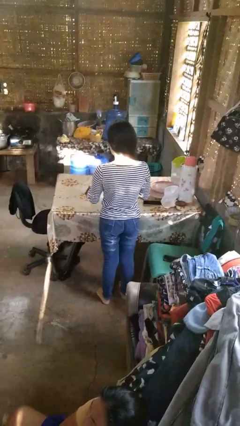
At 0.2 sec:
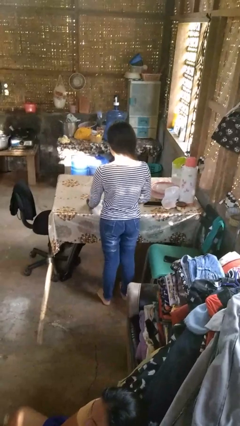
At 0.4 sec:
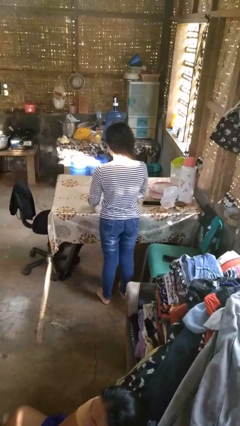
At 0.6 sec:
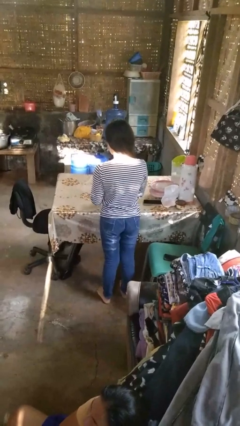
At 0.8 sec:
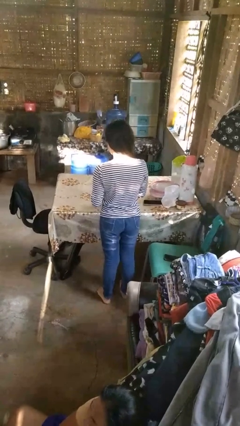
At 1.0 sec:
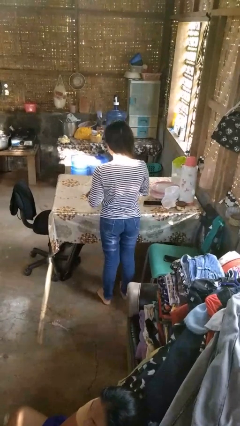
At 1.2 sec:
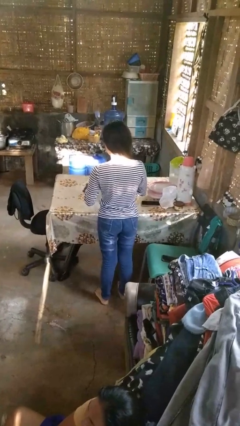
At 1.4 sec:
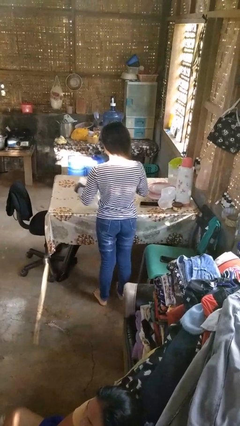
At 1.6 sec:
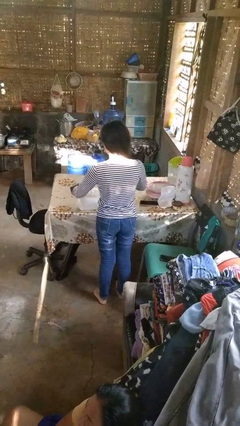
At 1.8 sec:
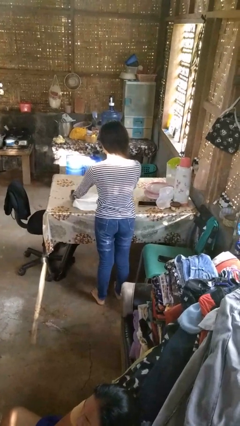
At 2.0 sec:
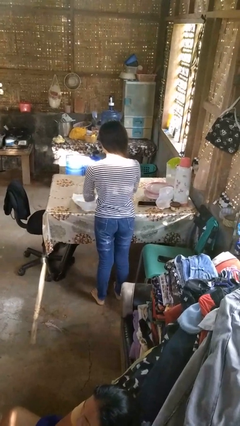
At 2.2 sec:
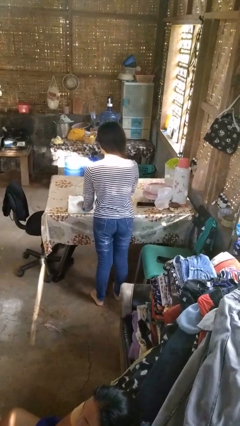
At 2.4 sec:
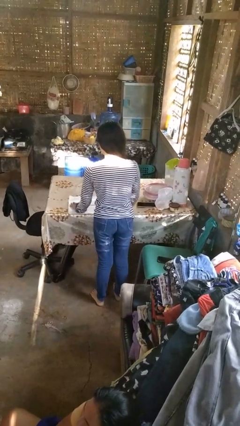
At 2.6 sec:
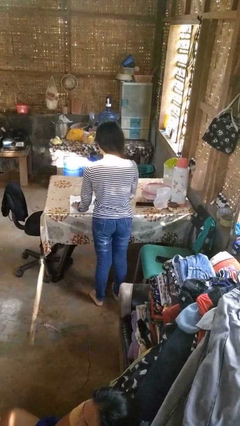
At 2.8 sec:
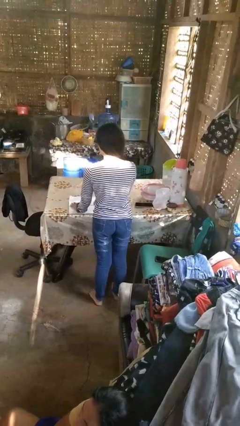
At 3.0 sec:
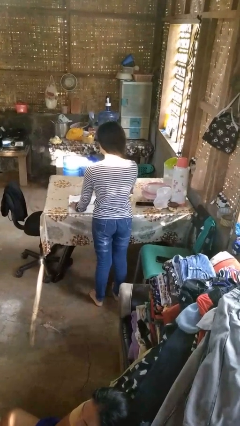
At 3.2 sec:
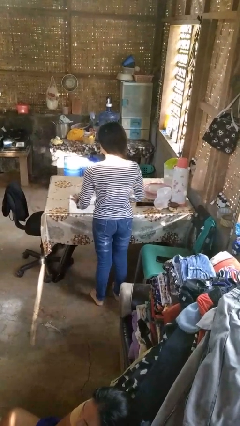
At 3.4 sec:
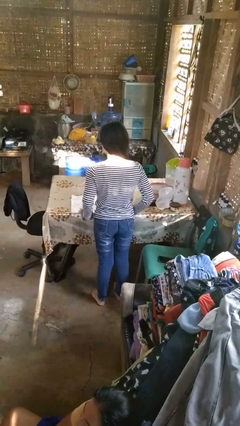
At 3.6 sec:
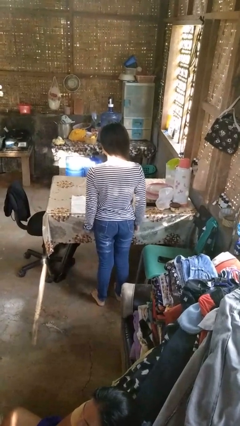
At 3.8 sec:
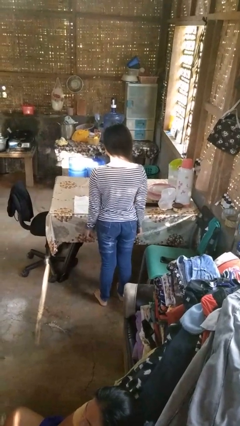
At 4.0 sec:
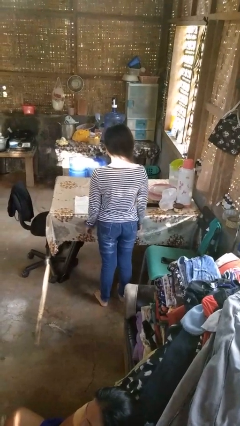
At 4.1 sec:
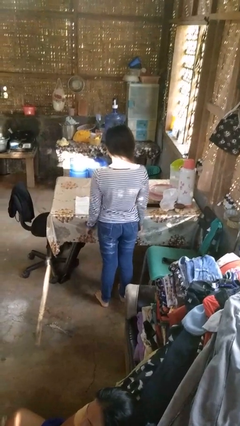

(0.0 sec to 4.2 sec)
person spreads tablecloth

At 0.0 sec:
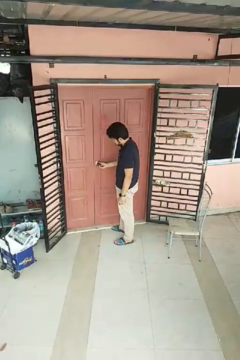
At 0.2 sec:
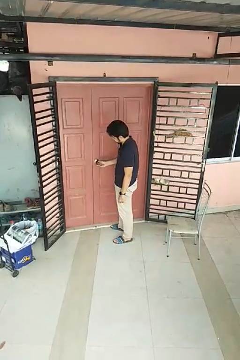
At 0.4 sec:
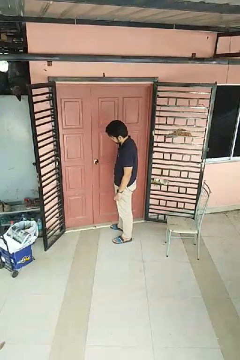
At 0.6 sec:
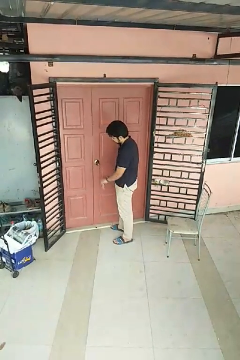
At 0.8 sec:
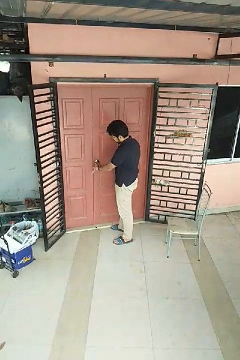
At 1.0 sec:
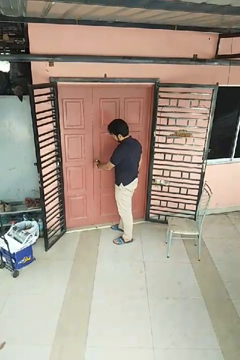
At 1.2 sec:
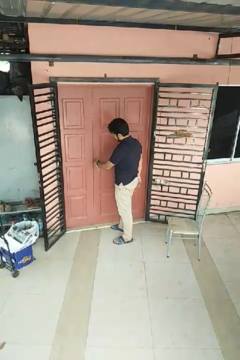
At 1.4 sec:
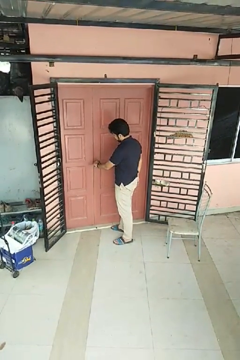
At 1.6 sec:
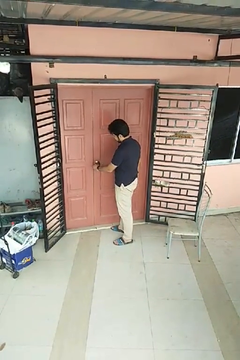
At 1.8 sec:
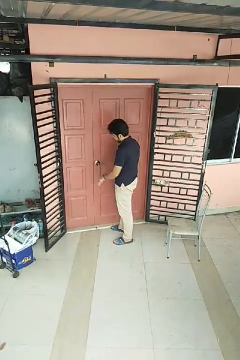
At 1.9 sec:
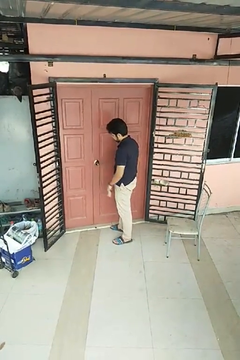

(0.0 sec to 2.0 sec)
person locks door with keys

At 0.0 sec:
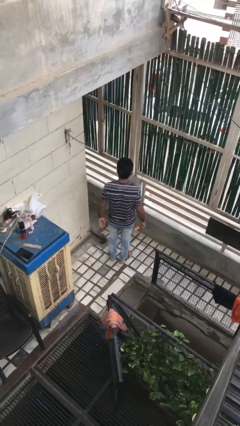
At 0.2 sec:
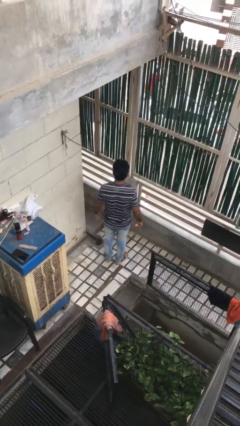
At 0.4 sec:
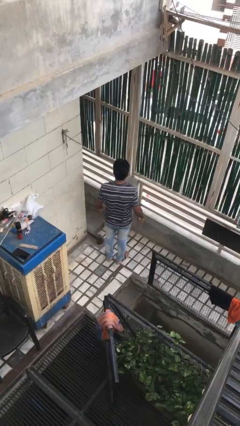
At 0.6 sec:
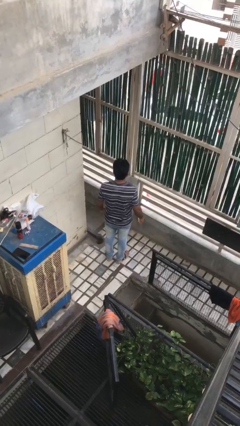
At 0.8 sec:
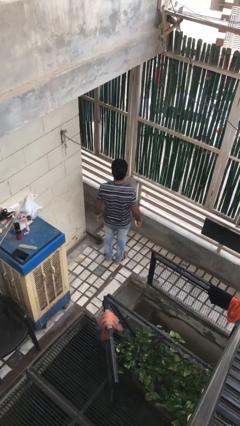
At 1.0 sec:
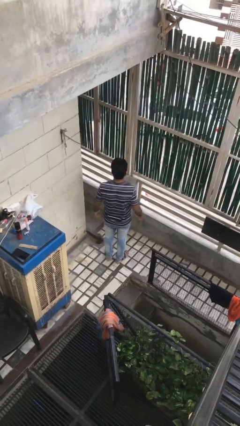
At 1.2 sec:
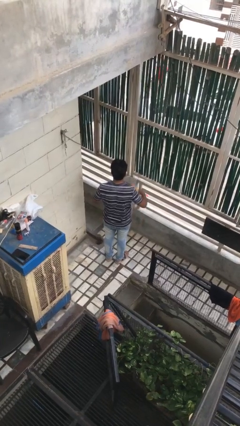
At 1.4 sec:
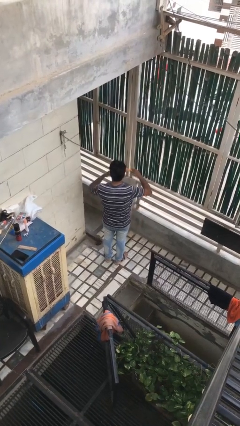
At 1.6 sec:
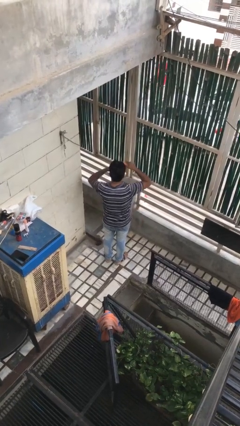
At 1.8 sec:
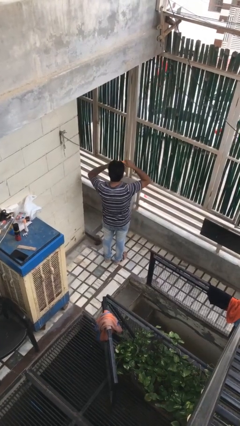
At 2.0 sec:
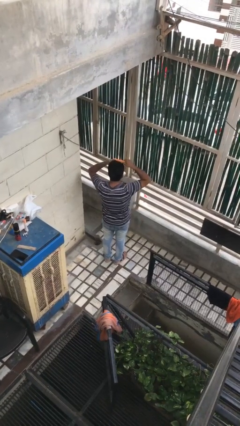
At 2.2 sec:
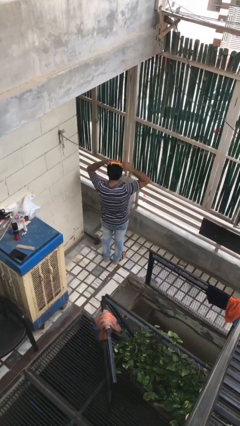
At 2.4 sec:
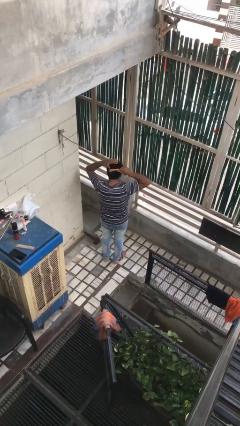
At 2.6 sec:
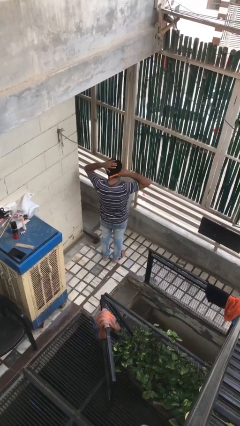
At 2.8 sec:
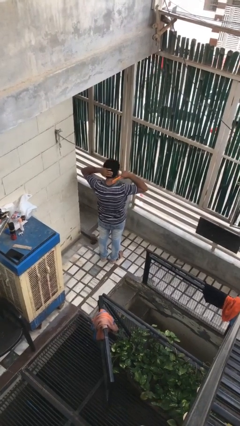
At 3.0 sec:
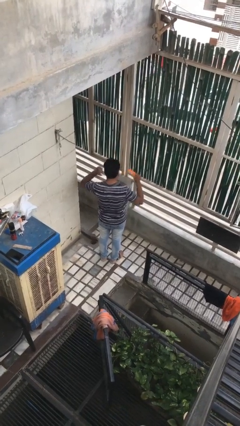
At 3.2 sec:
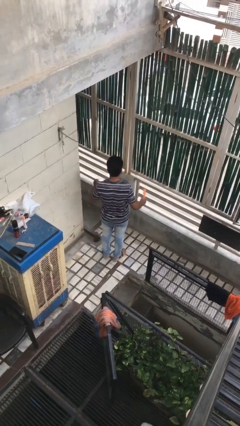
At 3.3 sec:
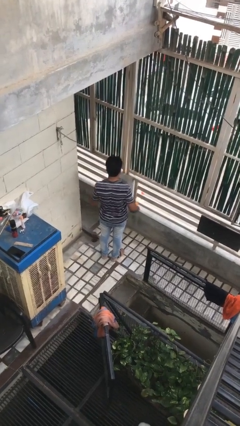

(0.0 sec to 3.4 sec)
person brushes hair

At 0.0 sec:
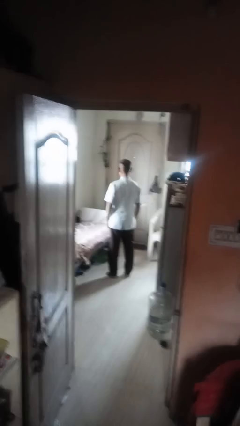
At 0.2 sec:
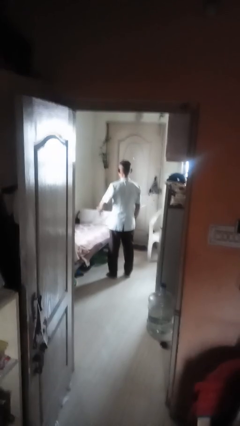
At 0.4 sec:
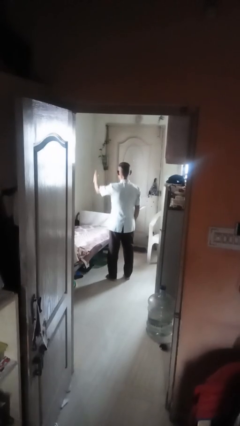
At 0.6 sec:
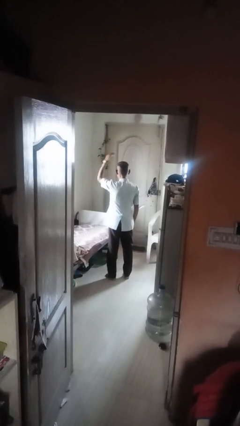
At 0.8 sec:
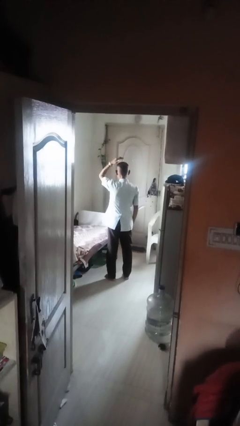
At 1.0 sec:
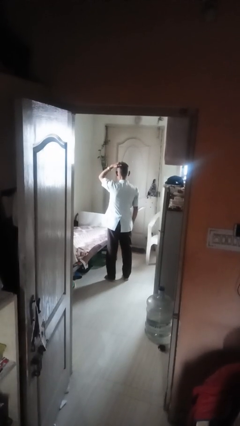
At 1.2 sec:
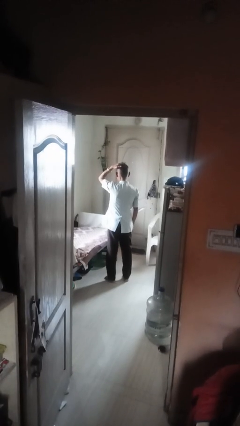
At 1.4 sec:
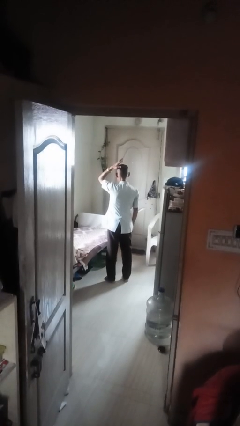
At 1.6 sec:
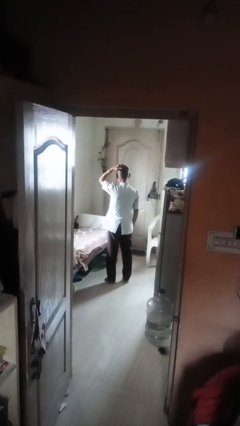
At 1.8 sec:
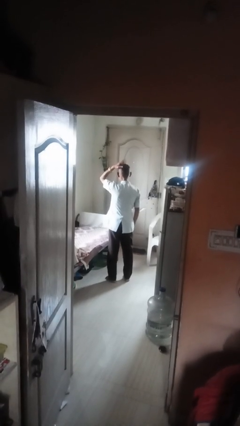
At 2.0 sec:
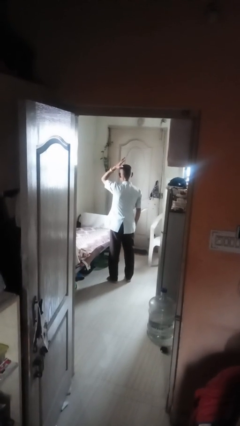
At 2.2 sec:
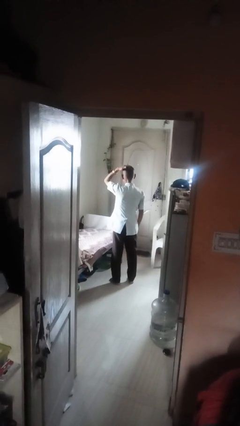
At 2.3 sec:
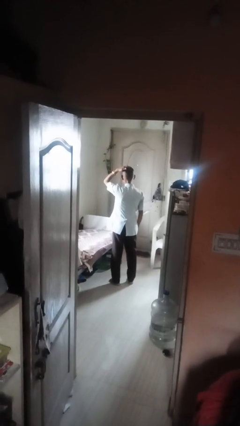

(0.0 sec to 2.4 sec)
person pats head

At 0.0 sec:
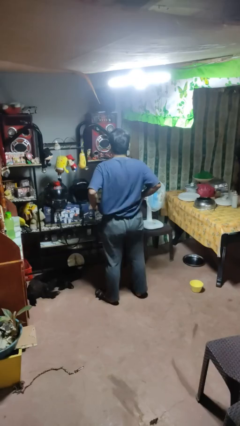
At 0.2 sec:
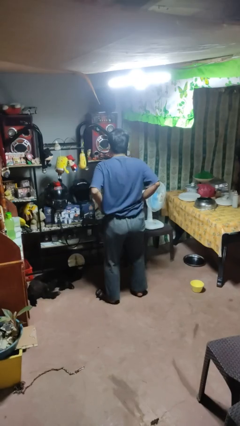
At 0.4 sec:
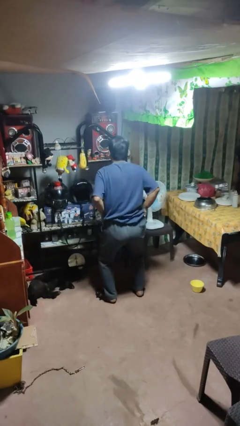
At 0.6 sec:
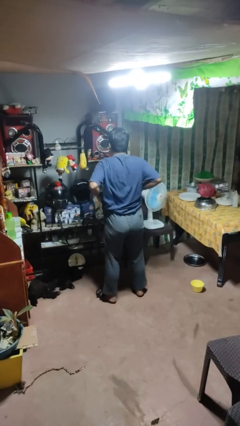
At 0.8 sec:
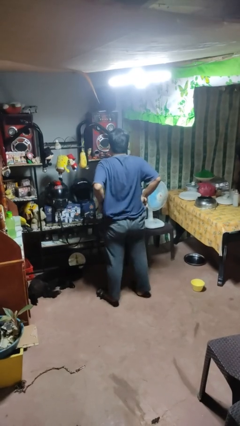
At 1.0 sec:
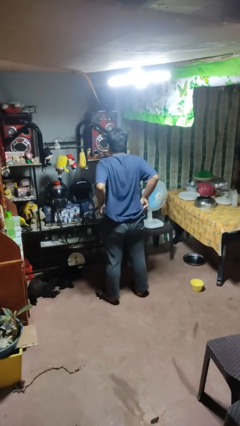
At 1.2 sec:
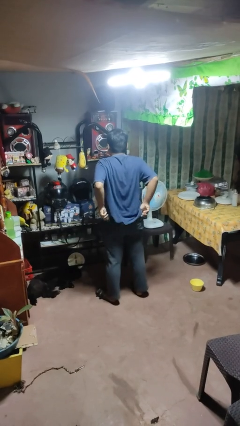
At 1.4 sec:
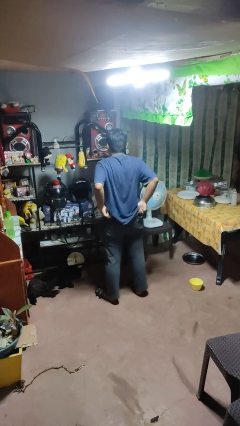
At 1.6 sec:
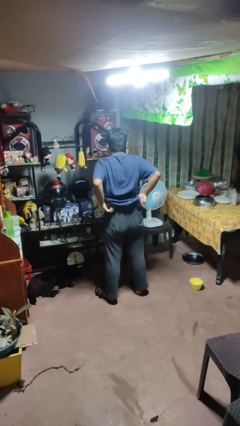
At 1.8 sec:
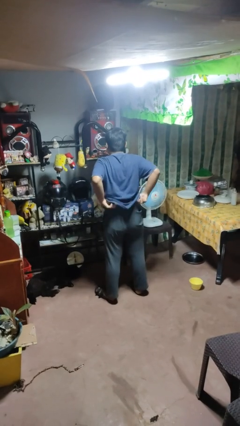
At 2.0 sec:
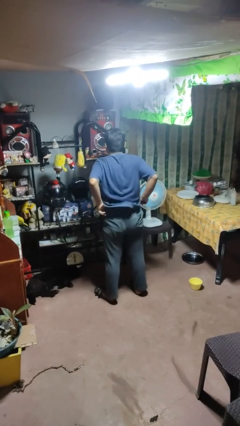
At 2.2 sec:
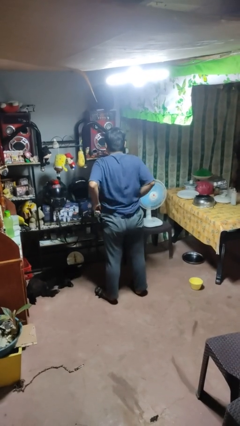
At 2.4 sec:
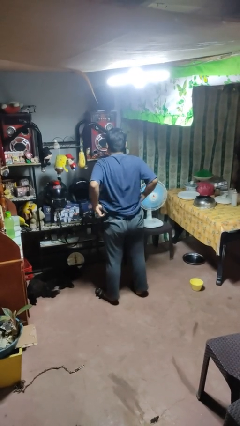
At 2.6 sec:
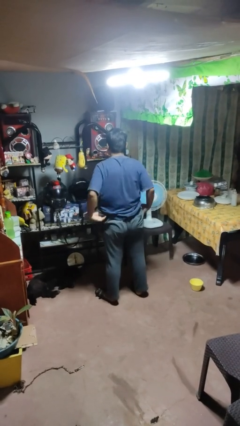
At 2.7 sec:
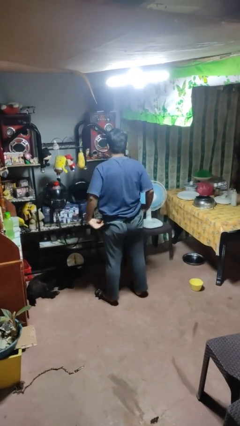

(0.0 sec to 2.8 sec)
person hikes up pants

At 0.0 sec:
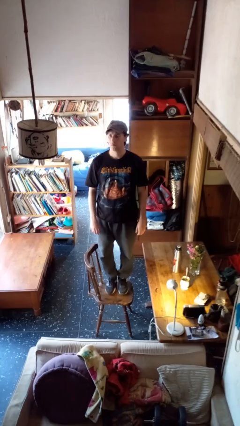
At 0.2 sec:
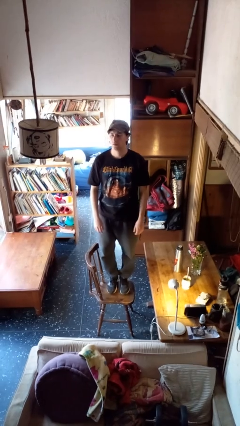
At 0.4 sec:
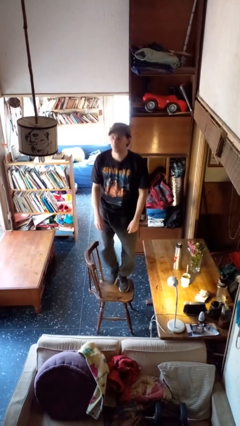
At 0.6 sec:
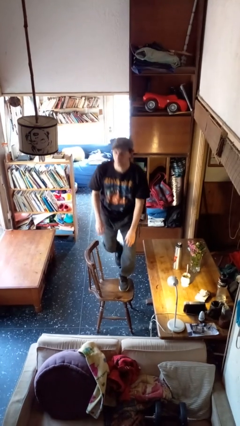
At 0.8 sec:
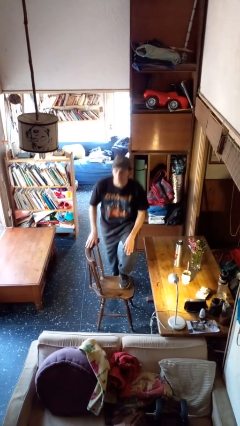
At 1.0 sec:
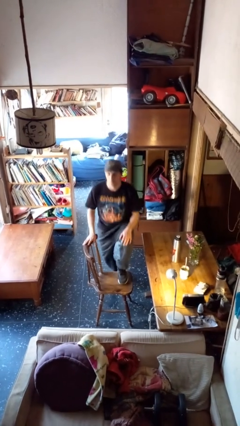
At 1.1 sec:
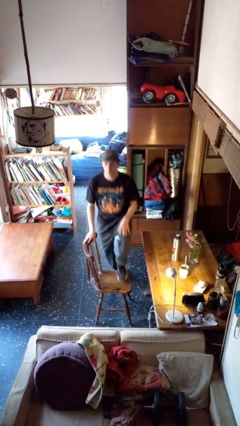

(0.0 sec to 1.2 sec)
person climbs off chair

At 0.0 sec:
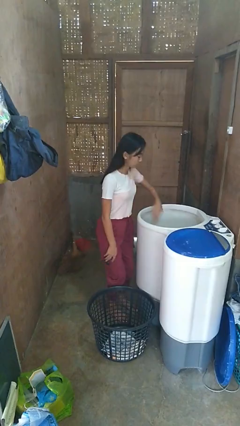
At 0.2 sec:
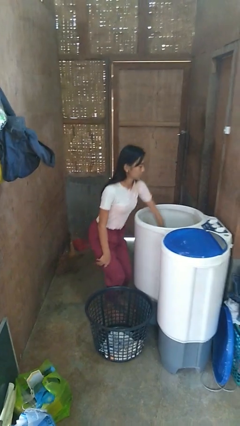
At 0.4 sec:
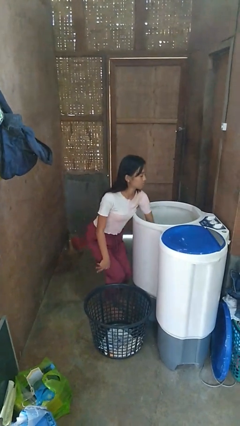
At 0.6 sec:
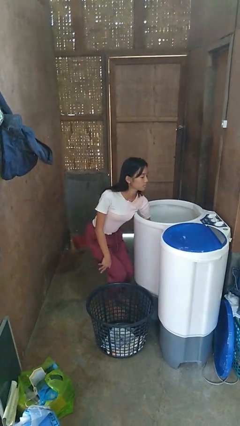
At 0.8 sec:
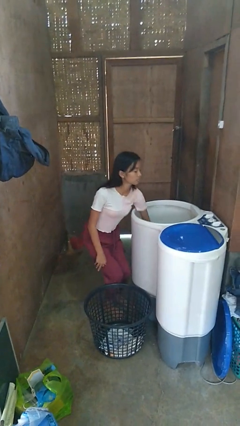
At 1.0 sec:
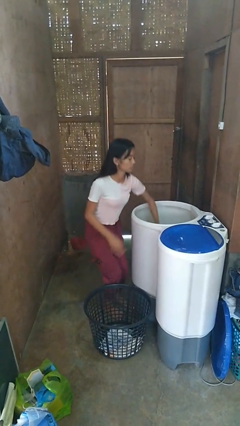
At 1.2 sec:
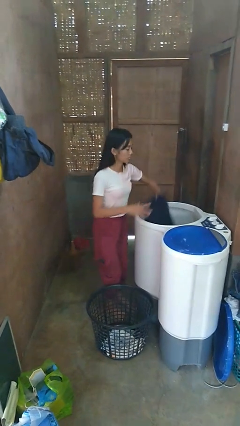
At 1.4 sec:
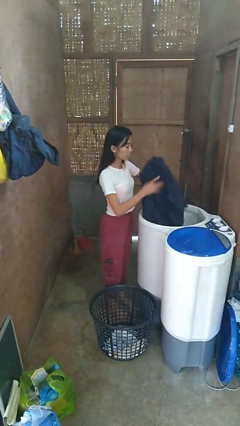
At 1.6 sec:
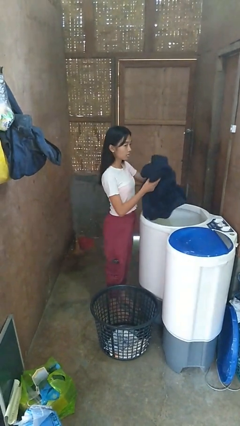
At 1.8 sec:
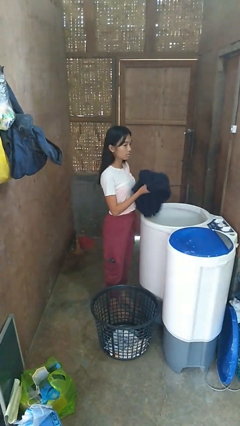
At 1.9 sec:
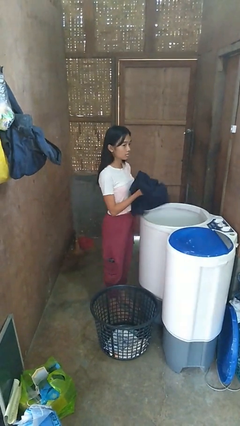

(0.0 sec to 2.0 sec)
person unloads clotheswasher
